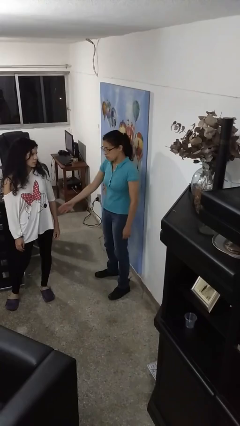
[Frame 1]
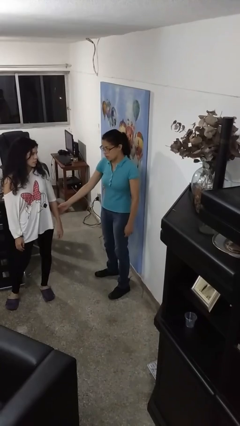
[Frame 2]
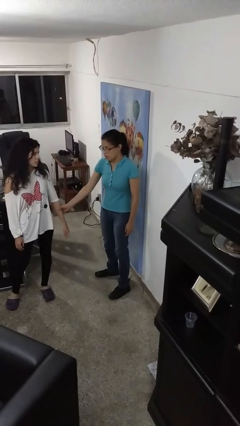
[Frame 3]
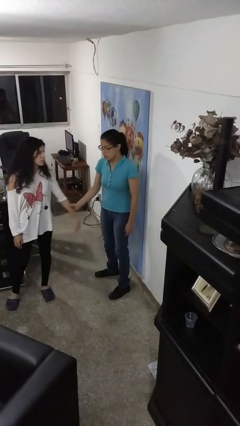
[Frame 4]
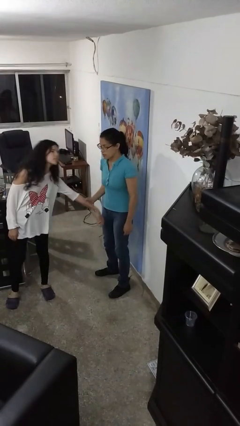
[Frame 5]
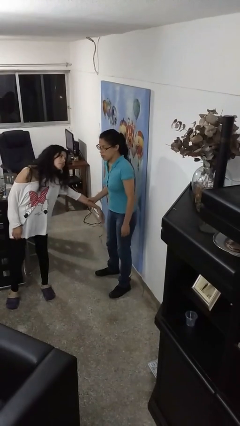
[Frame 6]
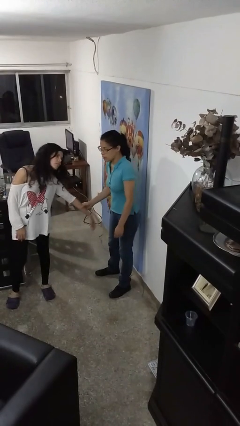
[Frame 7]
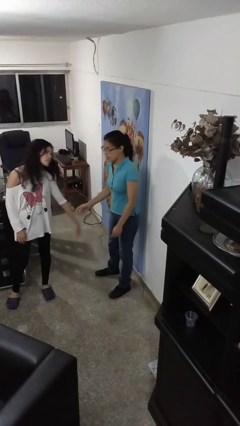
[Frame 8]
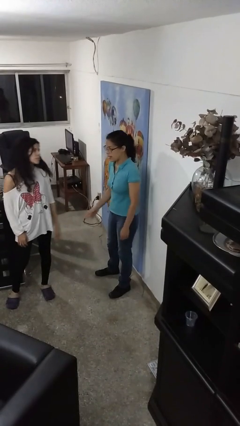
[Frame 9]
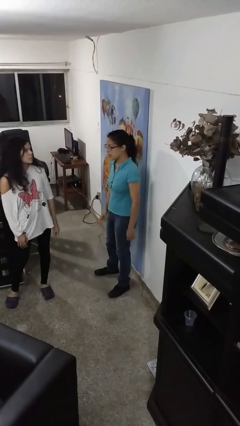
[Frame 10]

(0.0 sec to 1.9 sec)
person grabs person by forearm

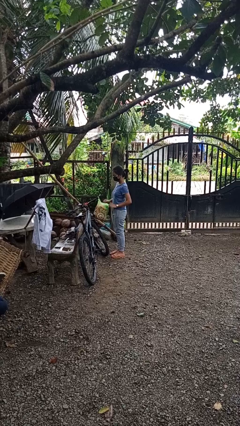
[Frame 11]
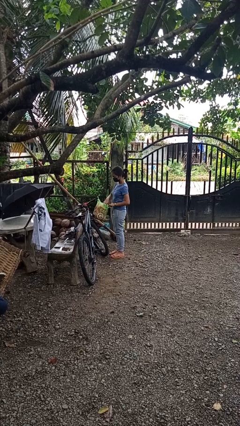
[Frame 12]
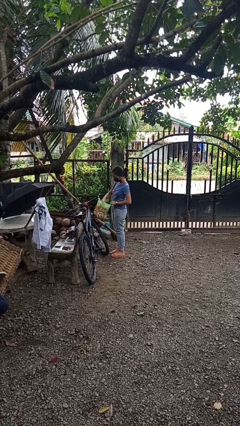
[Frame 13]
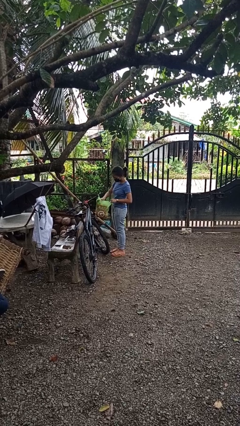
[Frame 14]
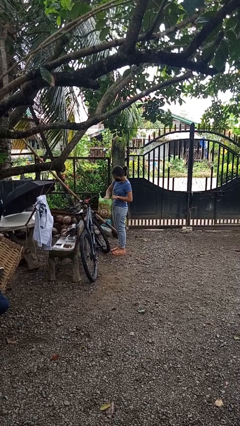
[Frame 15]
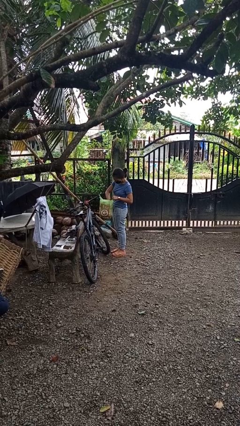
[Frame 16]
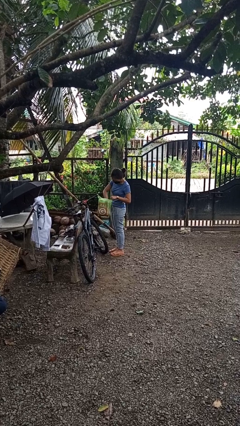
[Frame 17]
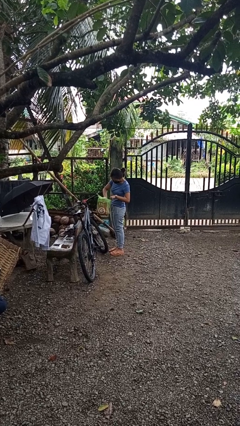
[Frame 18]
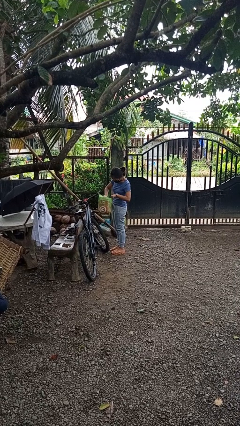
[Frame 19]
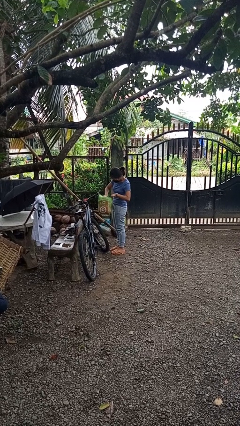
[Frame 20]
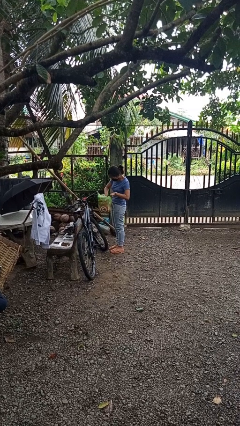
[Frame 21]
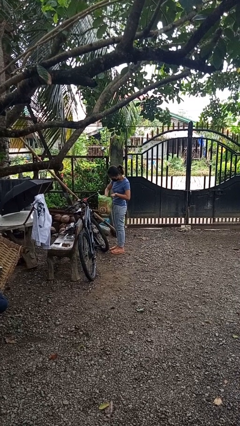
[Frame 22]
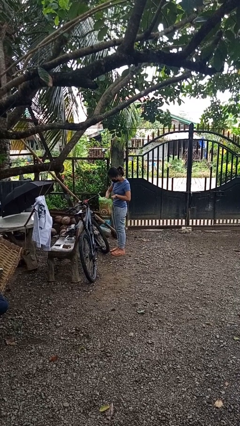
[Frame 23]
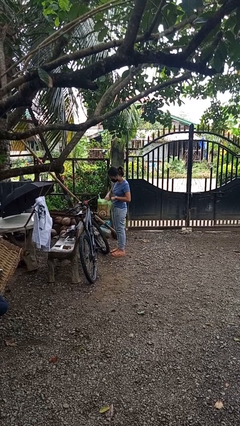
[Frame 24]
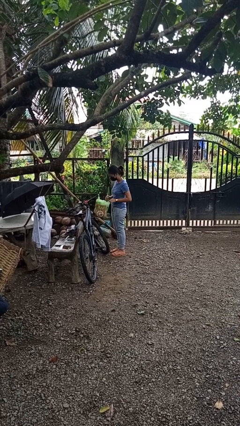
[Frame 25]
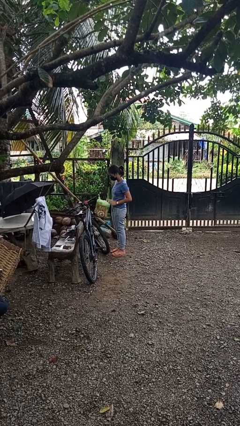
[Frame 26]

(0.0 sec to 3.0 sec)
person searches in bag

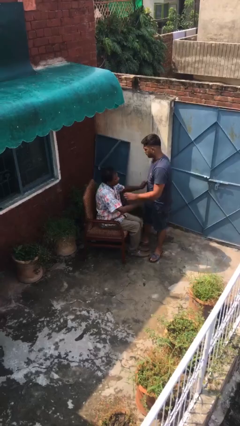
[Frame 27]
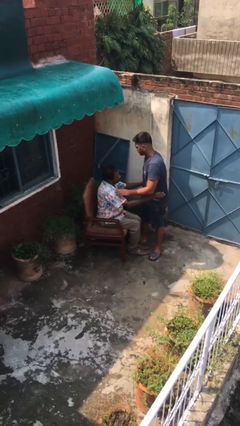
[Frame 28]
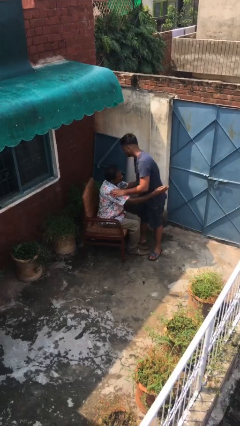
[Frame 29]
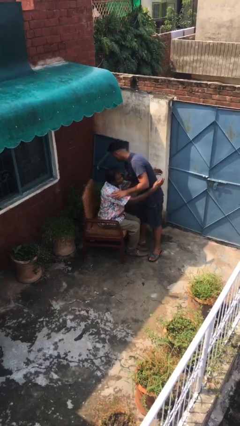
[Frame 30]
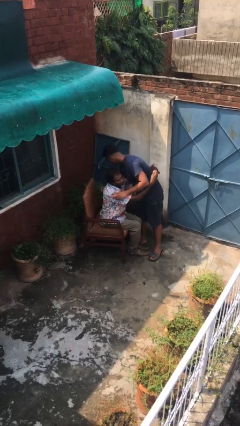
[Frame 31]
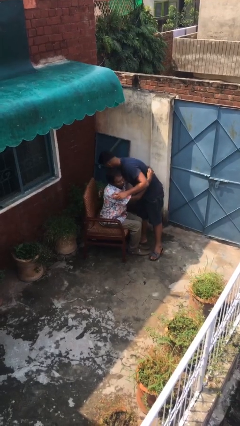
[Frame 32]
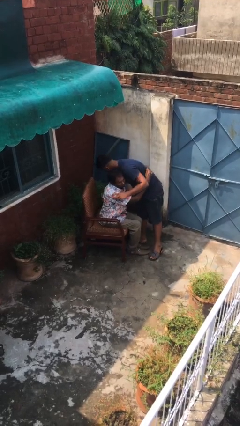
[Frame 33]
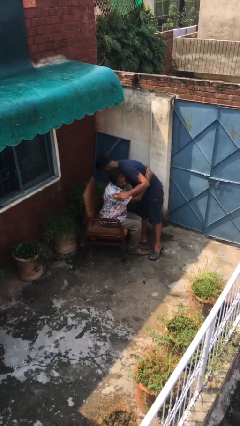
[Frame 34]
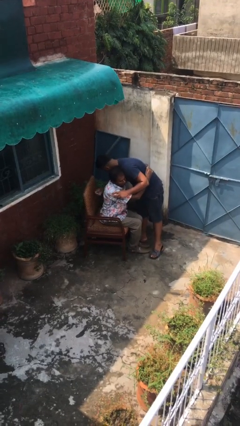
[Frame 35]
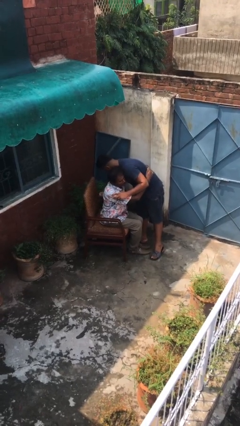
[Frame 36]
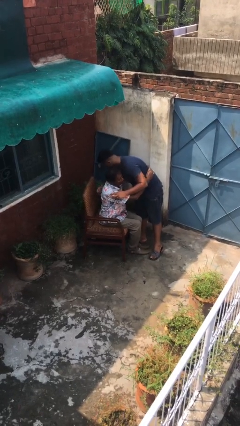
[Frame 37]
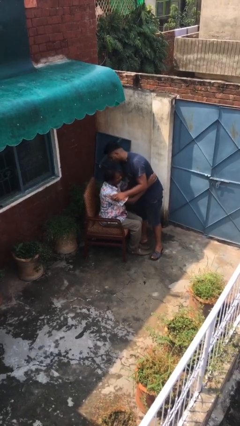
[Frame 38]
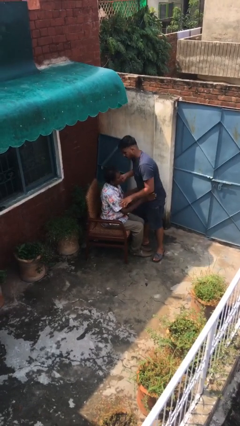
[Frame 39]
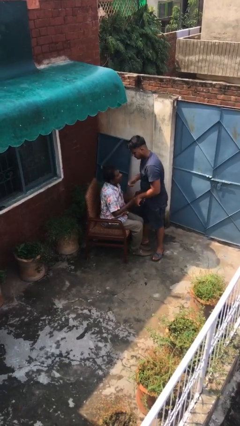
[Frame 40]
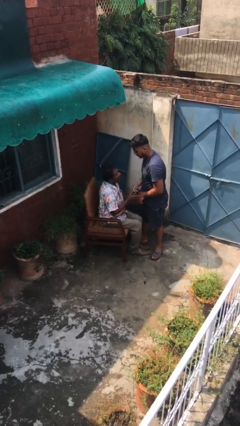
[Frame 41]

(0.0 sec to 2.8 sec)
person embraces person

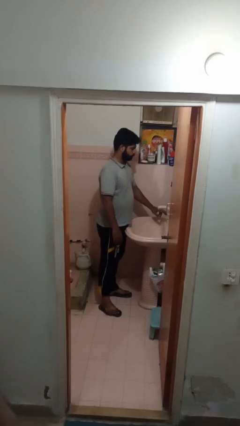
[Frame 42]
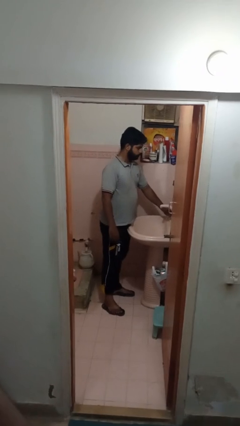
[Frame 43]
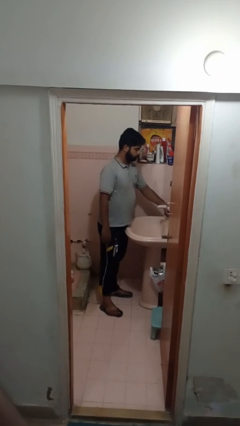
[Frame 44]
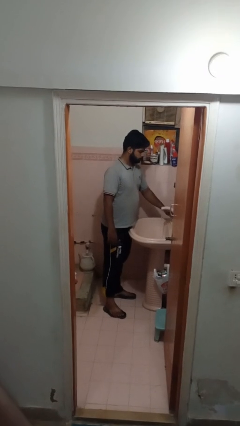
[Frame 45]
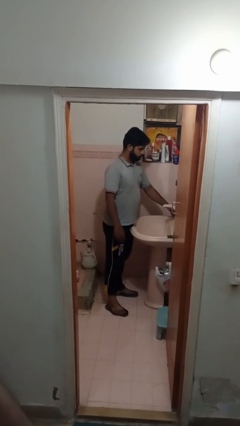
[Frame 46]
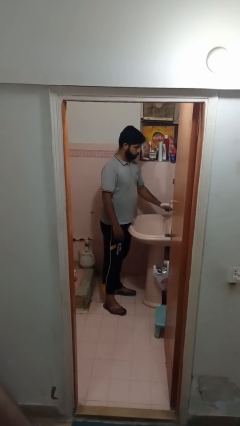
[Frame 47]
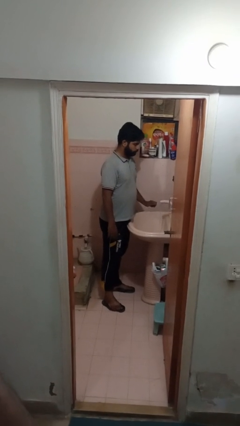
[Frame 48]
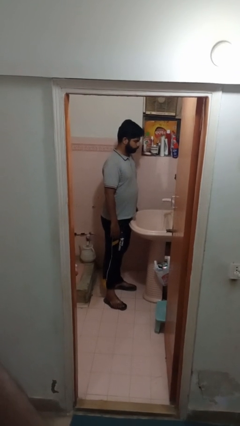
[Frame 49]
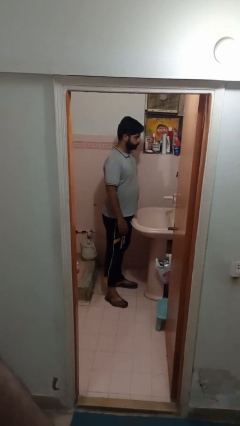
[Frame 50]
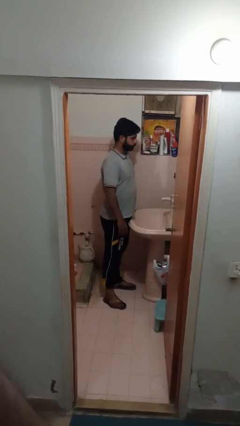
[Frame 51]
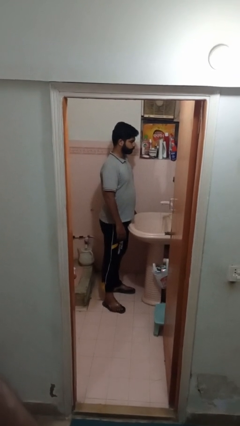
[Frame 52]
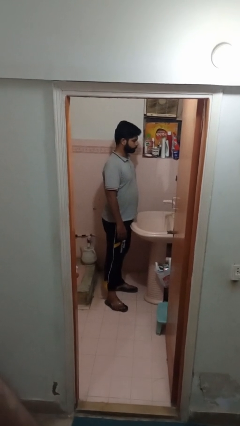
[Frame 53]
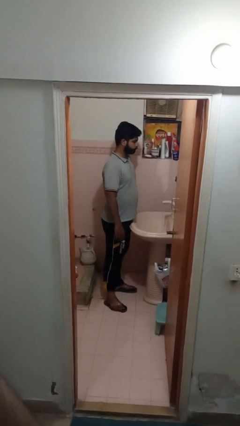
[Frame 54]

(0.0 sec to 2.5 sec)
person turns on faucet

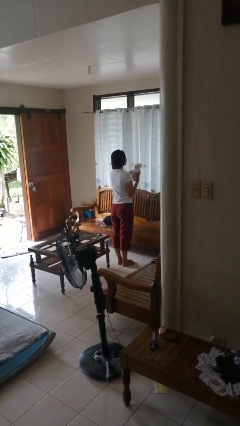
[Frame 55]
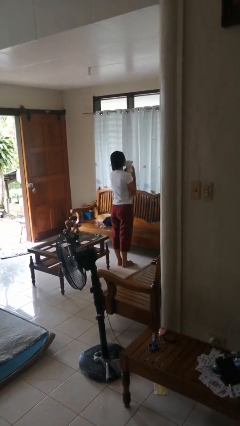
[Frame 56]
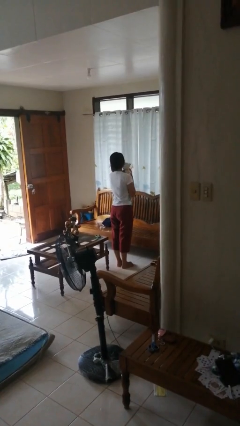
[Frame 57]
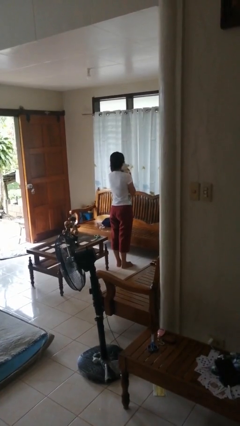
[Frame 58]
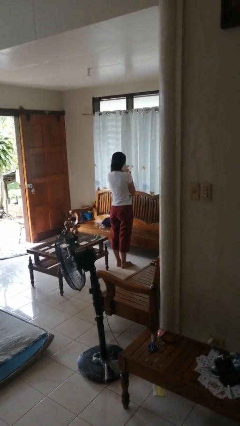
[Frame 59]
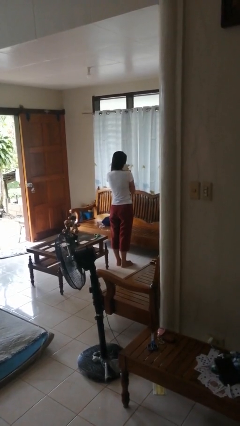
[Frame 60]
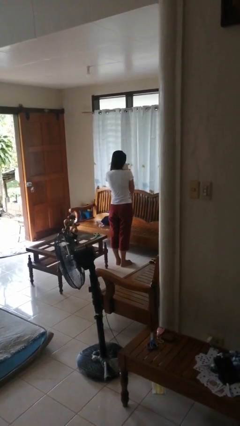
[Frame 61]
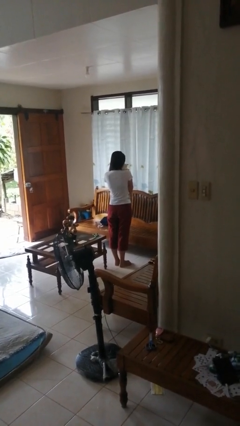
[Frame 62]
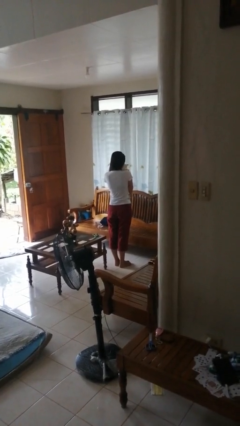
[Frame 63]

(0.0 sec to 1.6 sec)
person hugs stuffed animal

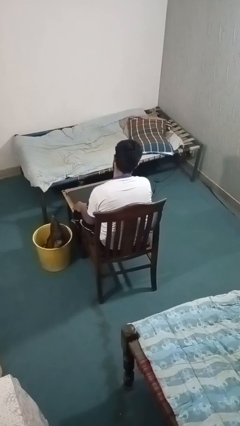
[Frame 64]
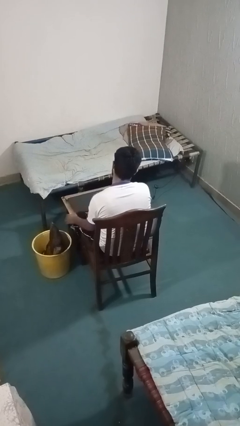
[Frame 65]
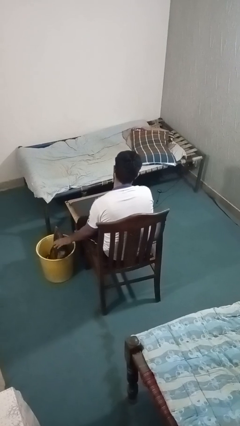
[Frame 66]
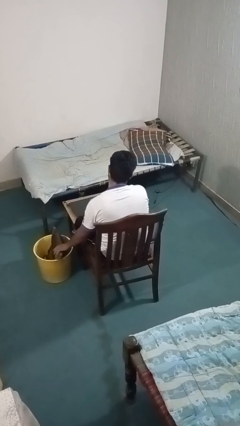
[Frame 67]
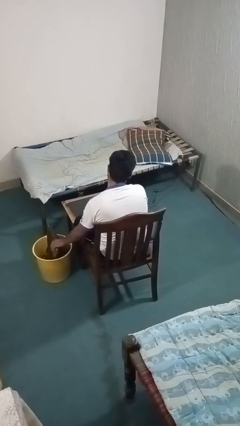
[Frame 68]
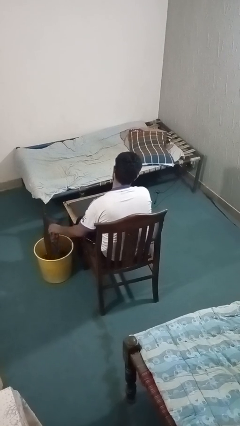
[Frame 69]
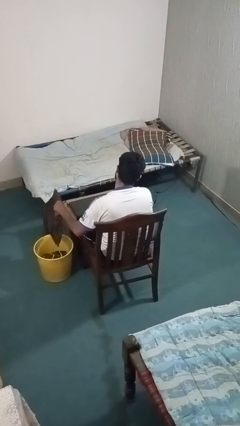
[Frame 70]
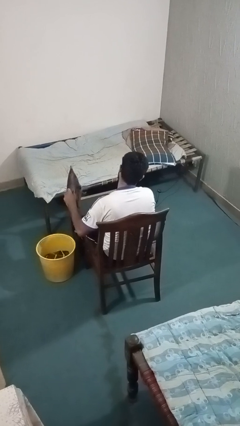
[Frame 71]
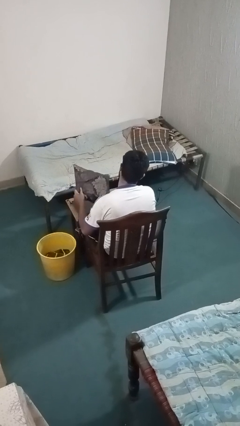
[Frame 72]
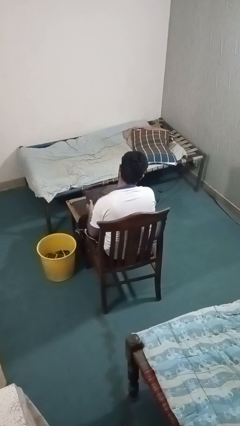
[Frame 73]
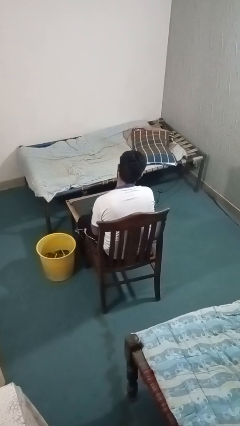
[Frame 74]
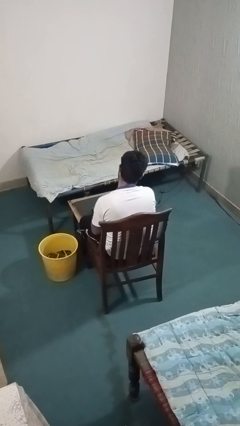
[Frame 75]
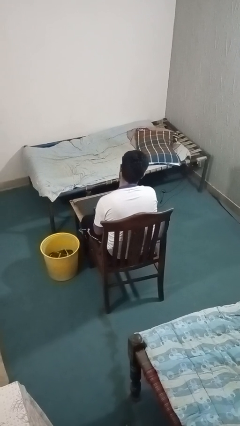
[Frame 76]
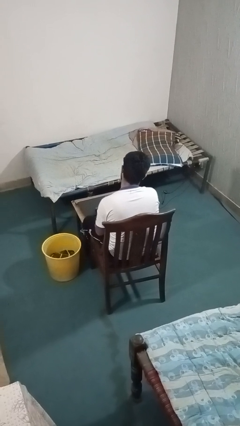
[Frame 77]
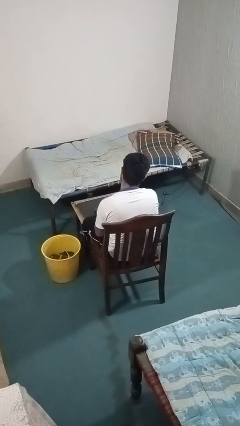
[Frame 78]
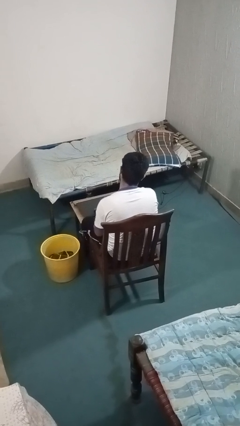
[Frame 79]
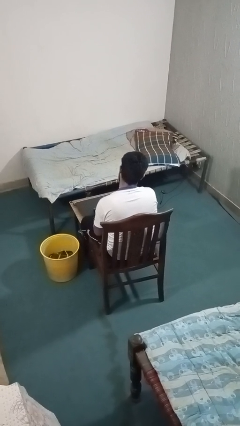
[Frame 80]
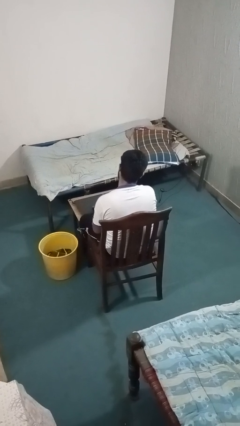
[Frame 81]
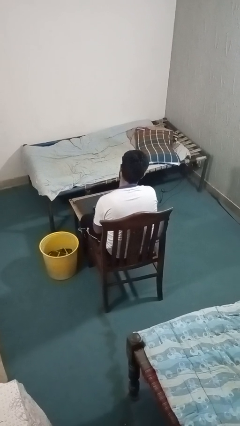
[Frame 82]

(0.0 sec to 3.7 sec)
person takes object from basket

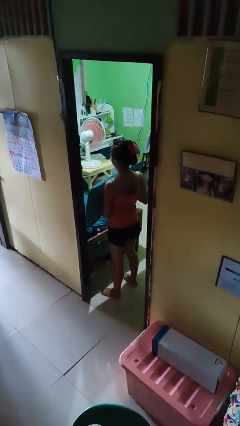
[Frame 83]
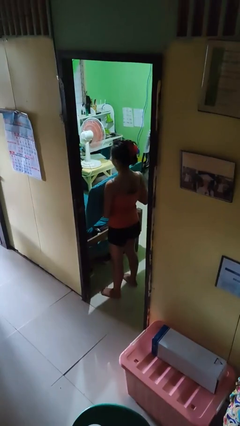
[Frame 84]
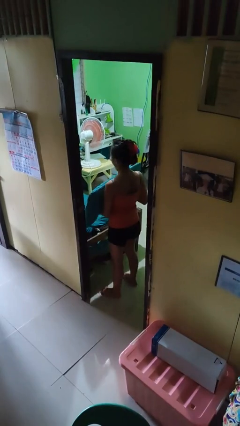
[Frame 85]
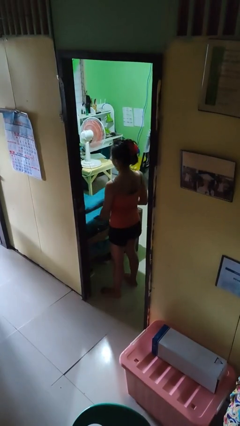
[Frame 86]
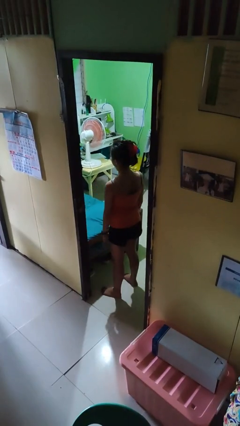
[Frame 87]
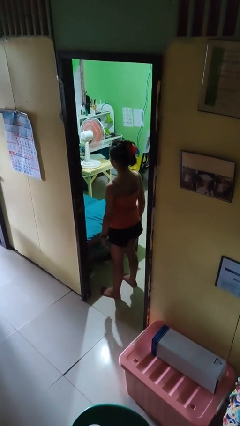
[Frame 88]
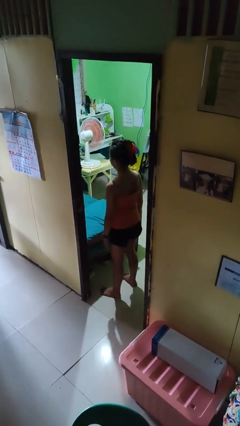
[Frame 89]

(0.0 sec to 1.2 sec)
person puts down object on bed
